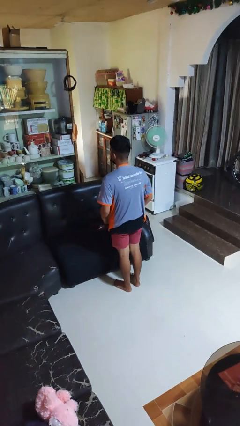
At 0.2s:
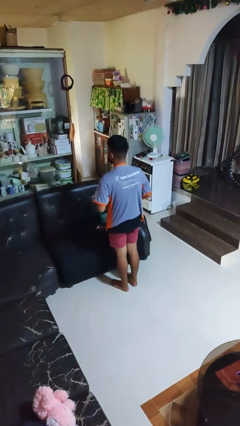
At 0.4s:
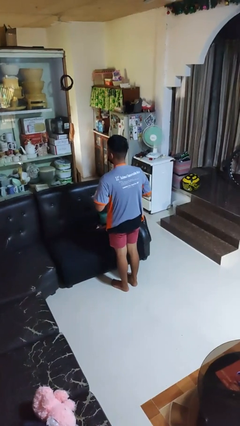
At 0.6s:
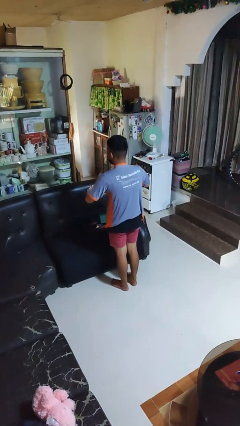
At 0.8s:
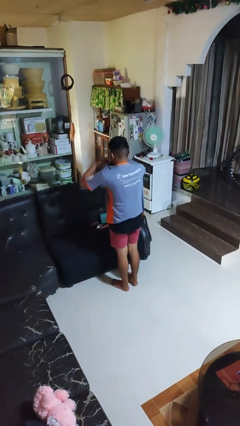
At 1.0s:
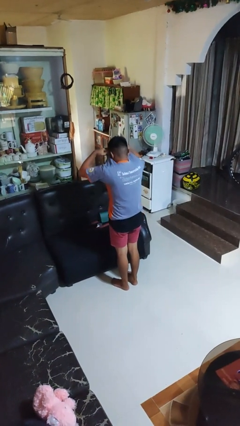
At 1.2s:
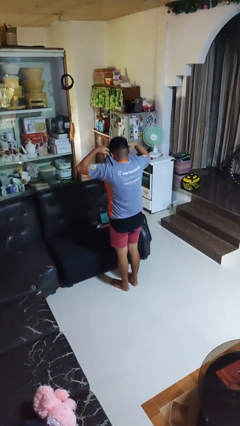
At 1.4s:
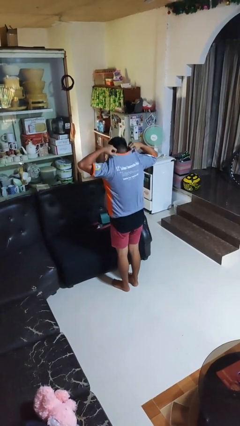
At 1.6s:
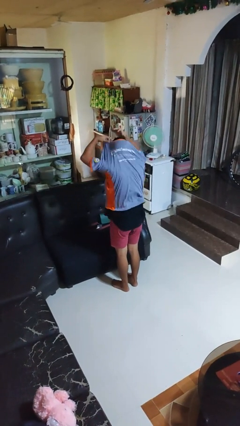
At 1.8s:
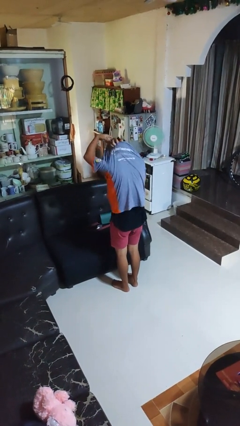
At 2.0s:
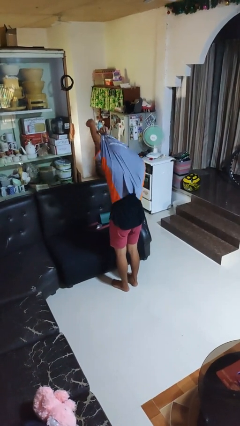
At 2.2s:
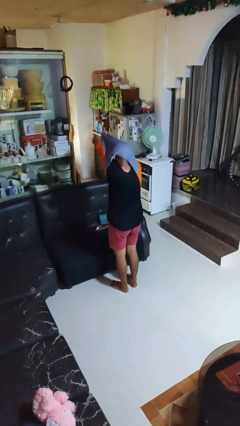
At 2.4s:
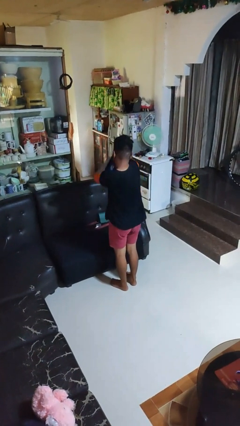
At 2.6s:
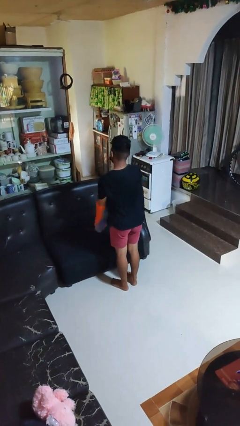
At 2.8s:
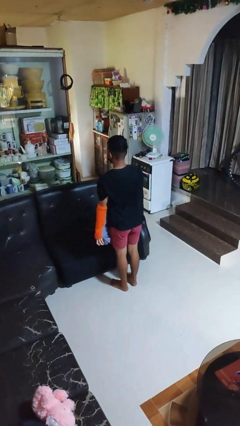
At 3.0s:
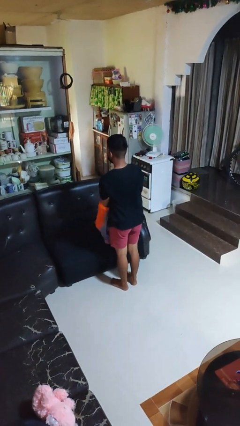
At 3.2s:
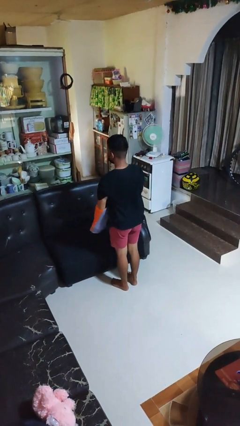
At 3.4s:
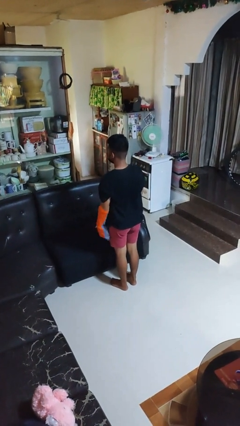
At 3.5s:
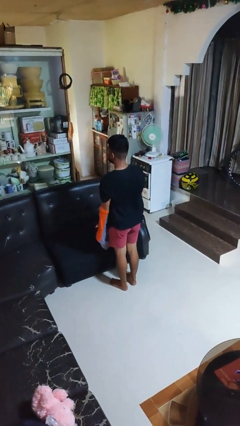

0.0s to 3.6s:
person takes off shirt

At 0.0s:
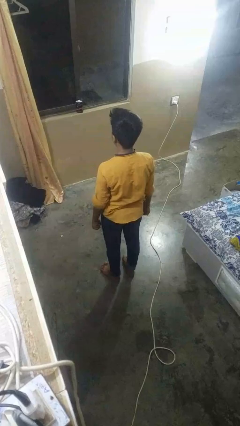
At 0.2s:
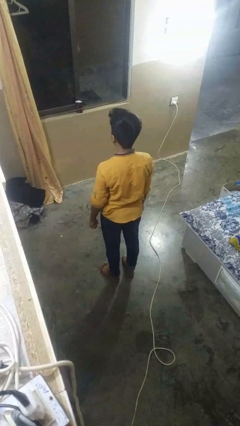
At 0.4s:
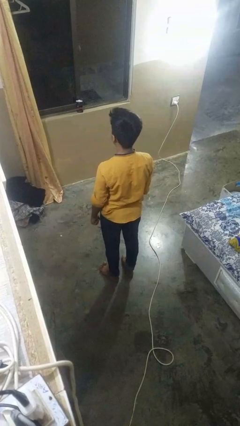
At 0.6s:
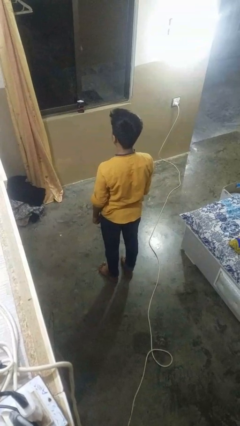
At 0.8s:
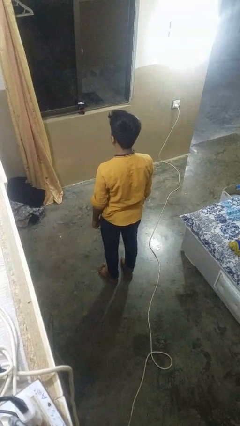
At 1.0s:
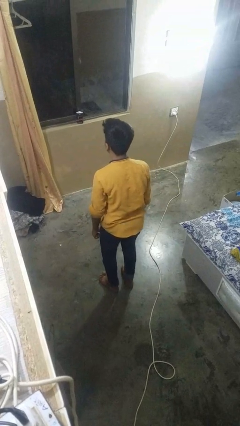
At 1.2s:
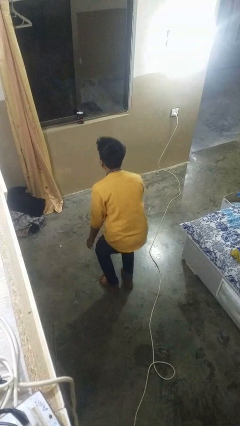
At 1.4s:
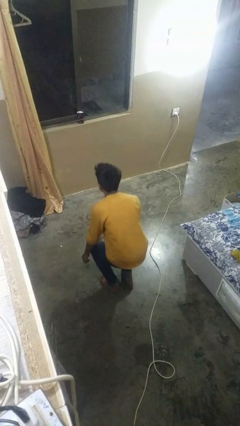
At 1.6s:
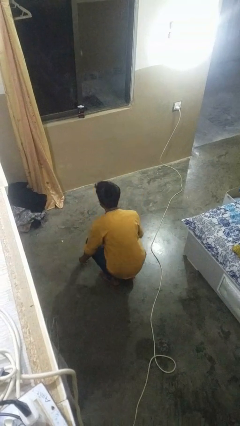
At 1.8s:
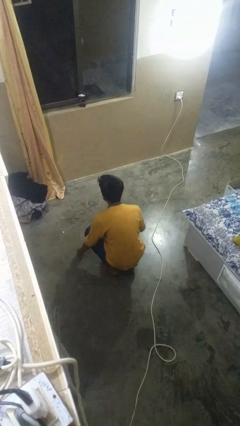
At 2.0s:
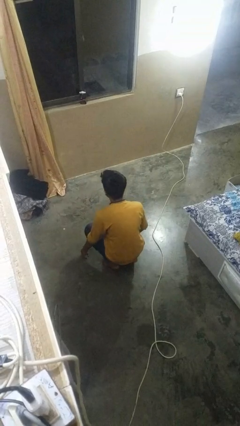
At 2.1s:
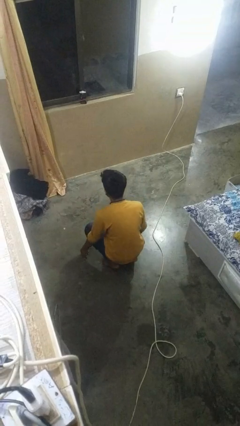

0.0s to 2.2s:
person exercises with situp

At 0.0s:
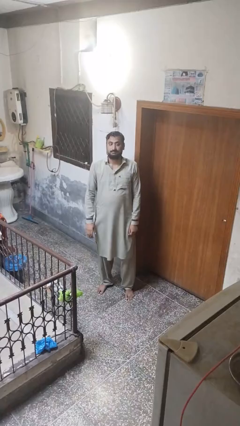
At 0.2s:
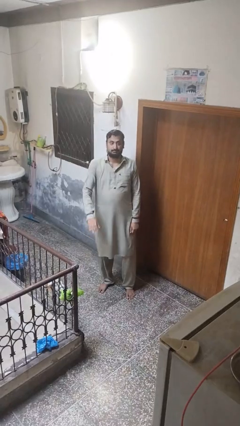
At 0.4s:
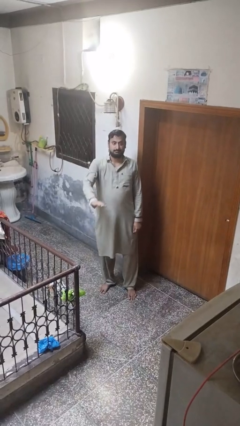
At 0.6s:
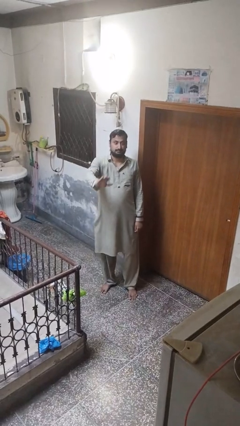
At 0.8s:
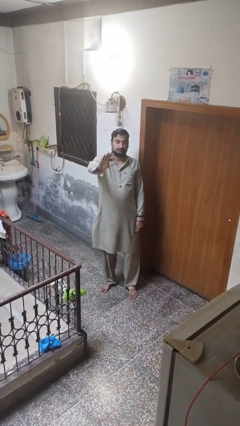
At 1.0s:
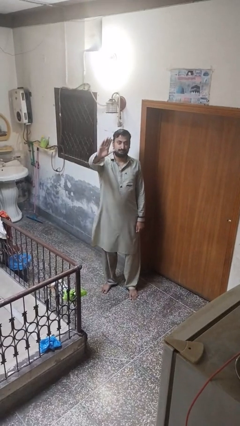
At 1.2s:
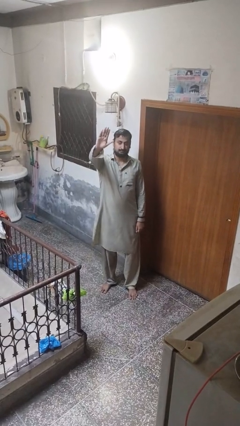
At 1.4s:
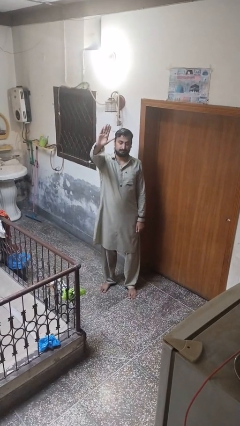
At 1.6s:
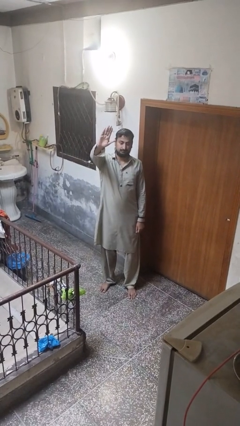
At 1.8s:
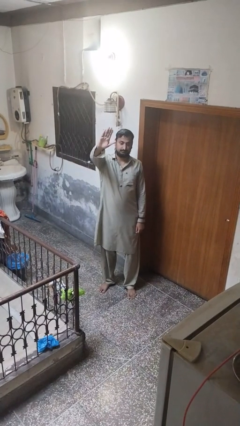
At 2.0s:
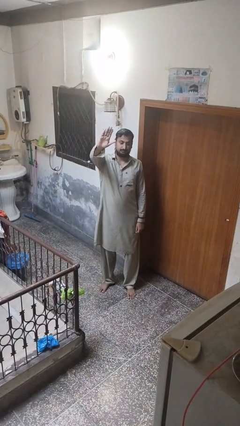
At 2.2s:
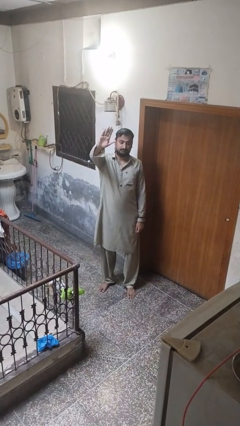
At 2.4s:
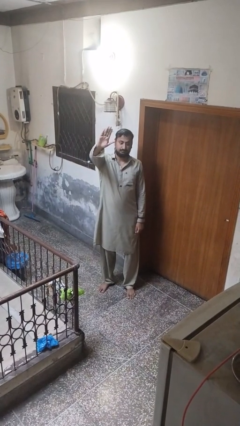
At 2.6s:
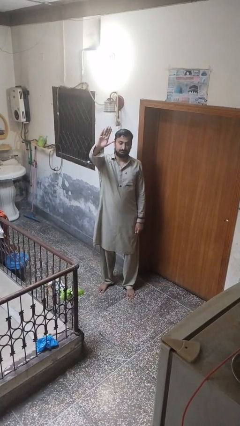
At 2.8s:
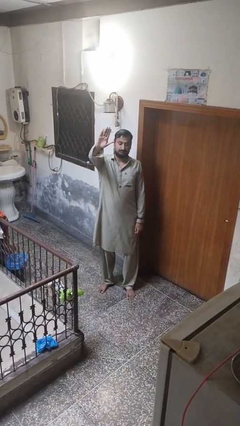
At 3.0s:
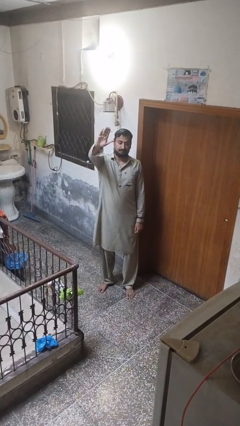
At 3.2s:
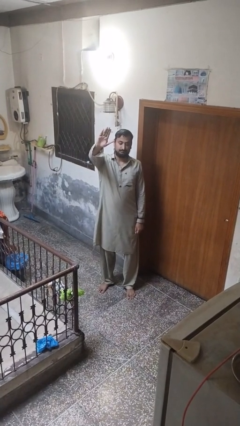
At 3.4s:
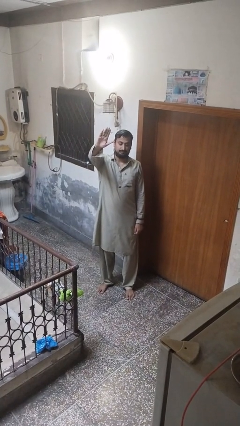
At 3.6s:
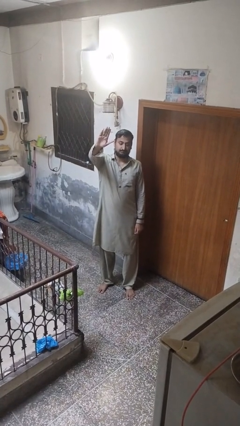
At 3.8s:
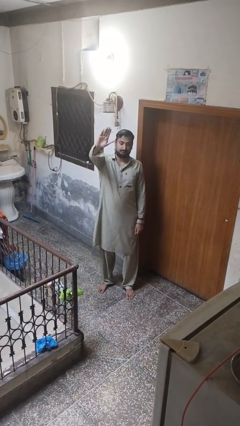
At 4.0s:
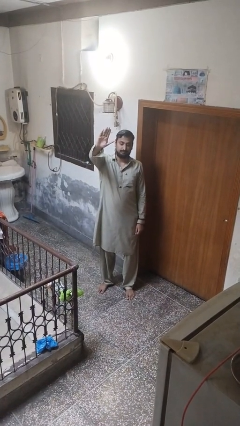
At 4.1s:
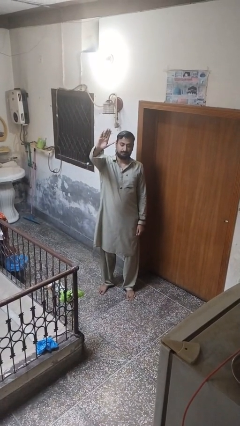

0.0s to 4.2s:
person gestures stop

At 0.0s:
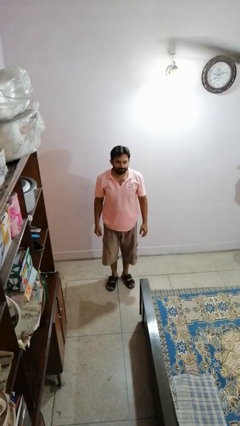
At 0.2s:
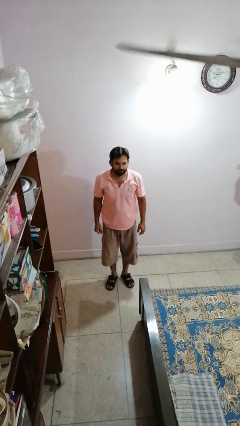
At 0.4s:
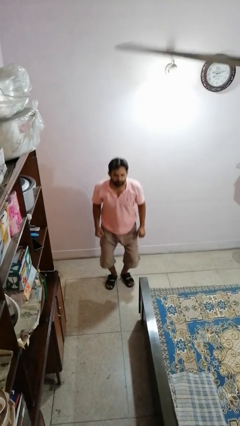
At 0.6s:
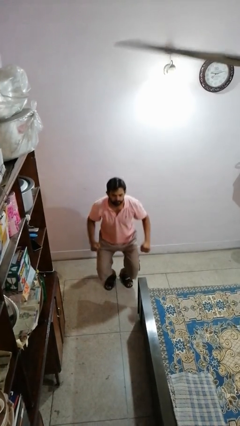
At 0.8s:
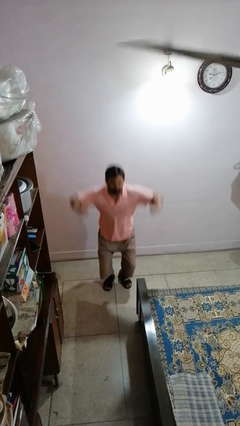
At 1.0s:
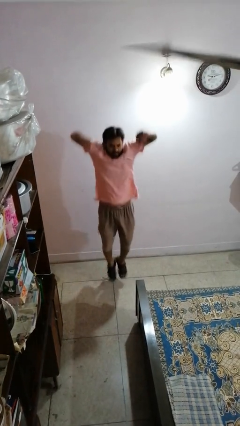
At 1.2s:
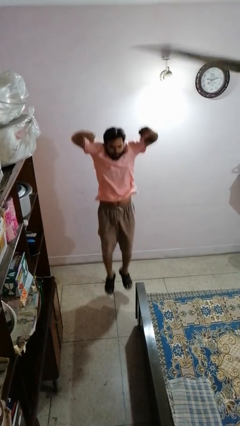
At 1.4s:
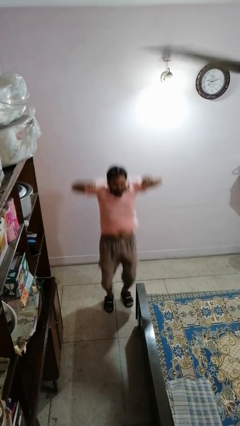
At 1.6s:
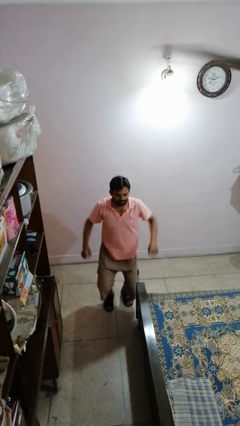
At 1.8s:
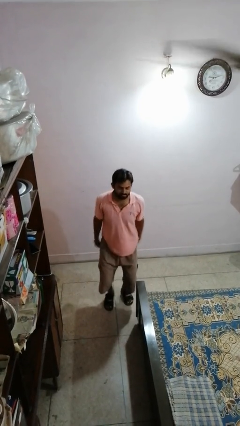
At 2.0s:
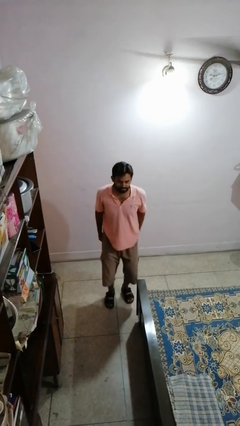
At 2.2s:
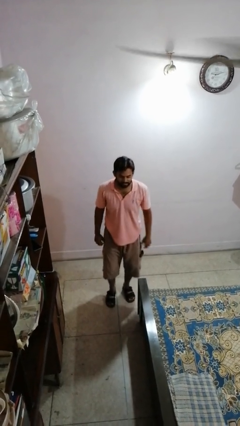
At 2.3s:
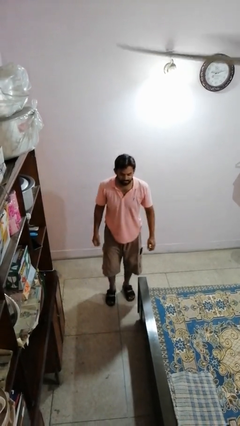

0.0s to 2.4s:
person jumps

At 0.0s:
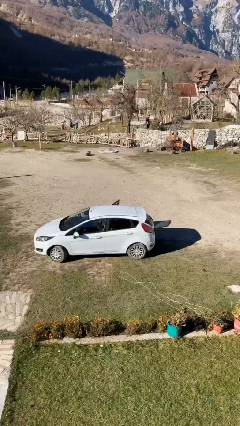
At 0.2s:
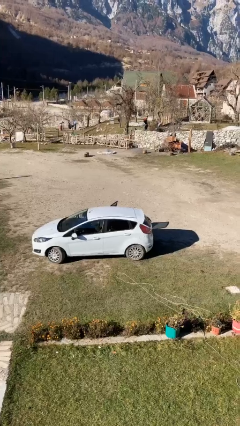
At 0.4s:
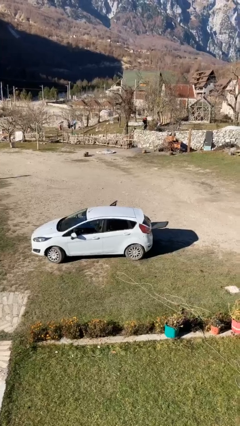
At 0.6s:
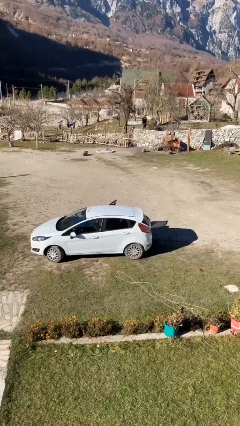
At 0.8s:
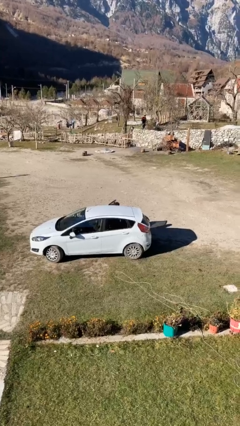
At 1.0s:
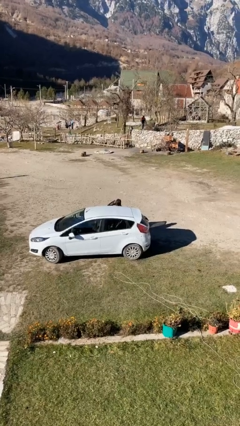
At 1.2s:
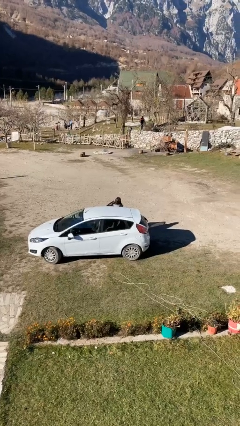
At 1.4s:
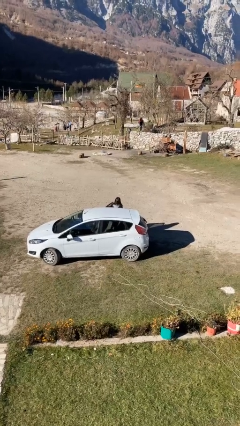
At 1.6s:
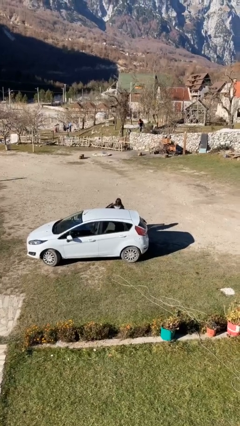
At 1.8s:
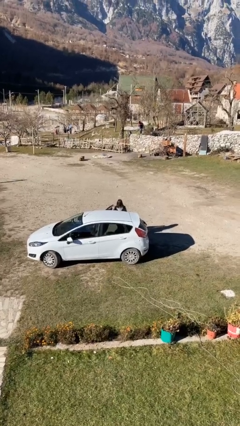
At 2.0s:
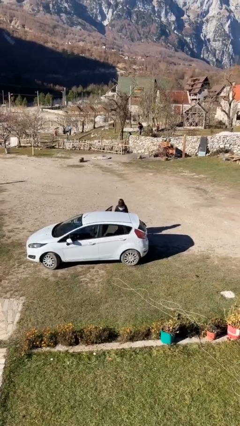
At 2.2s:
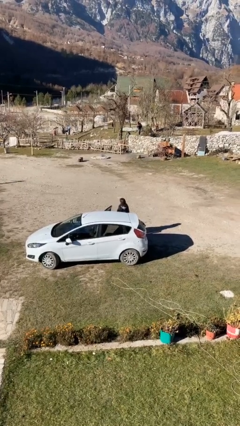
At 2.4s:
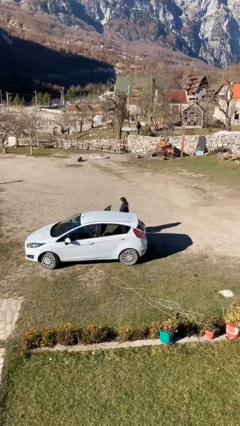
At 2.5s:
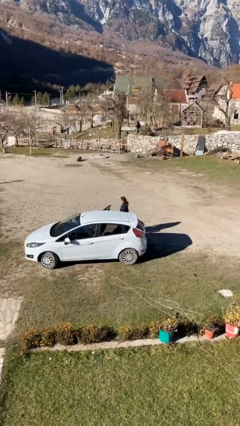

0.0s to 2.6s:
person exits car

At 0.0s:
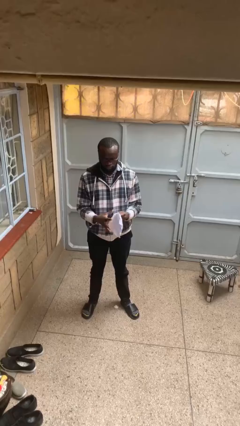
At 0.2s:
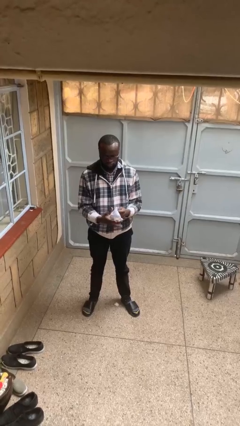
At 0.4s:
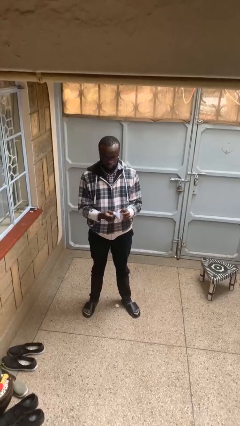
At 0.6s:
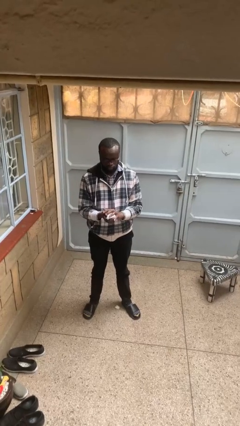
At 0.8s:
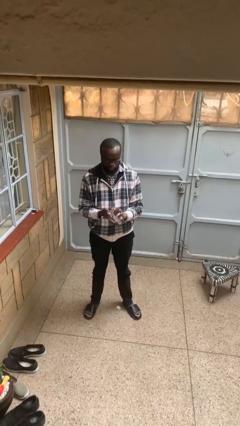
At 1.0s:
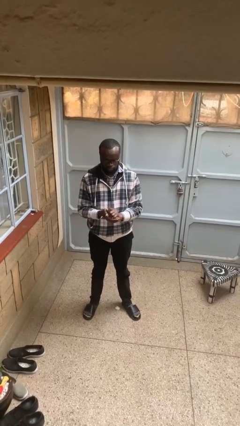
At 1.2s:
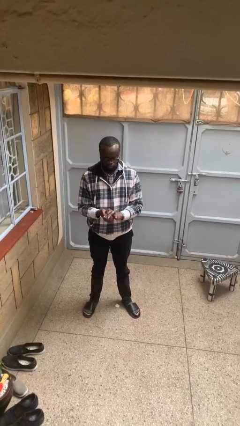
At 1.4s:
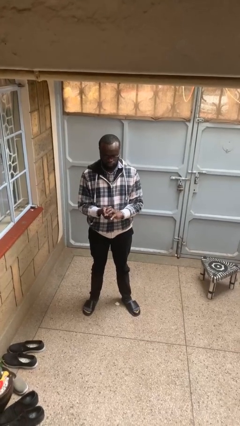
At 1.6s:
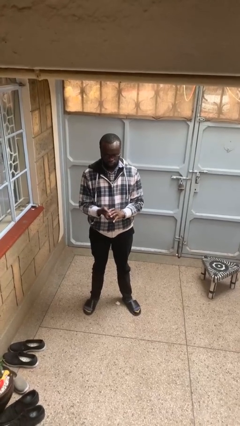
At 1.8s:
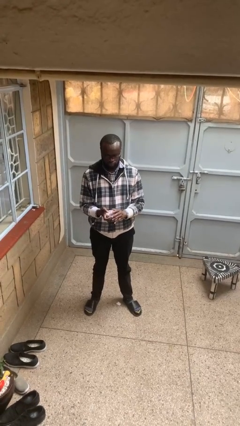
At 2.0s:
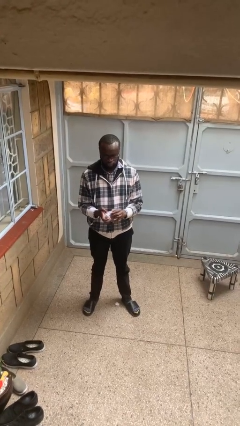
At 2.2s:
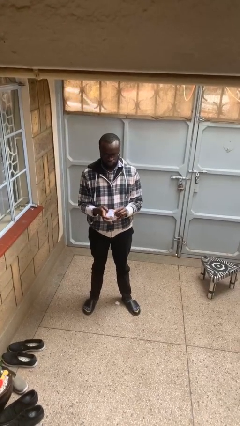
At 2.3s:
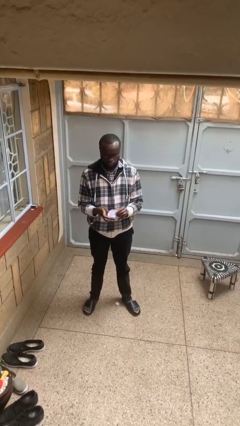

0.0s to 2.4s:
person crumples paper

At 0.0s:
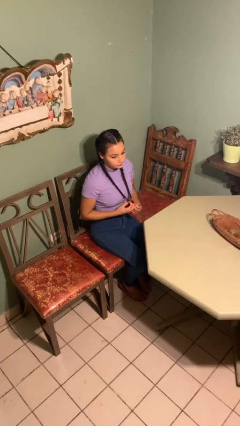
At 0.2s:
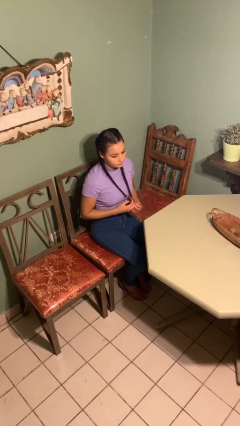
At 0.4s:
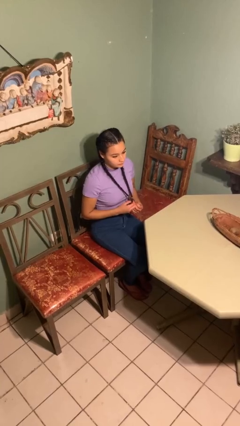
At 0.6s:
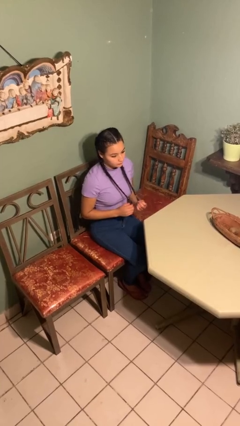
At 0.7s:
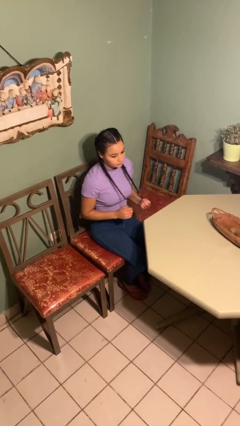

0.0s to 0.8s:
person strokes hair
